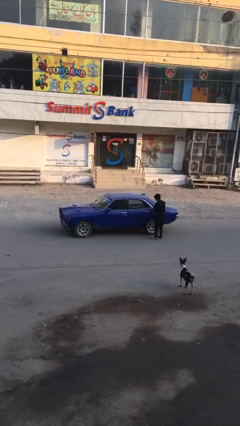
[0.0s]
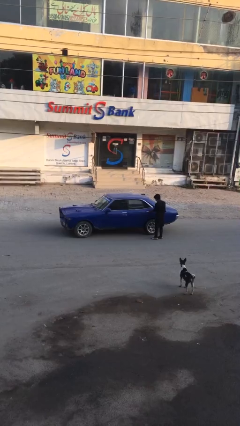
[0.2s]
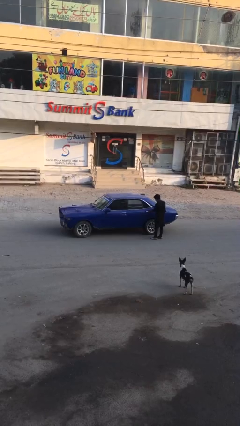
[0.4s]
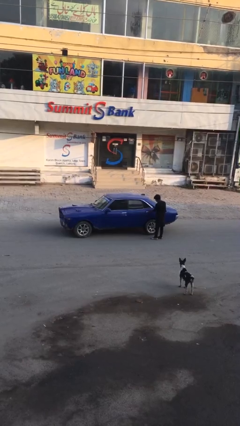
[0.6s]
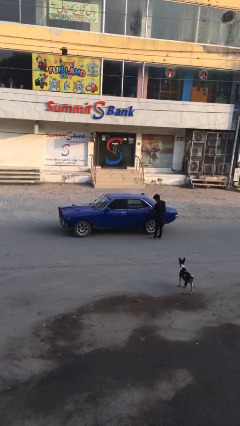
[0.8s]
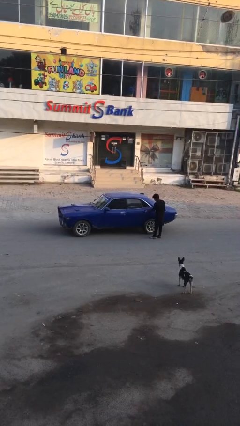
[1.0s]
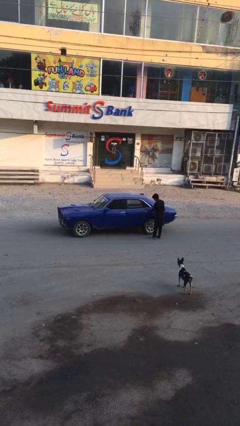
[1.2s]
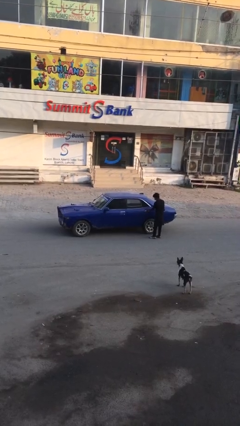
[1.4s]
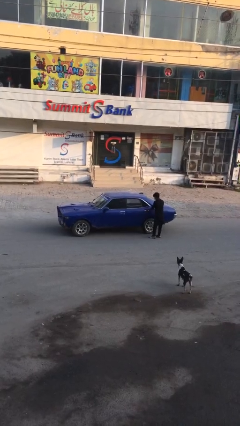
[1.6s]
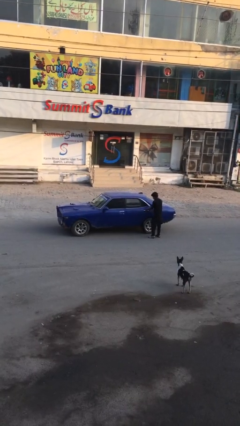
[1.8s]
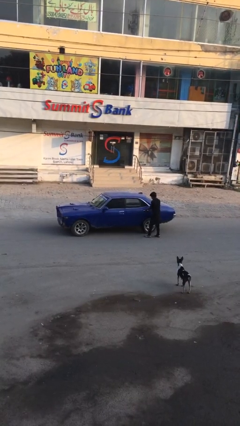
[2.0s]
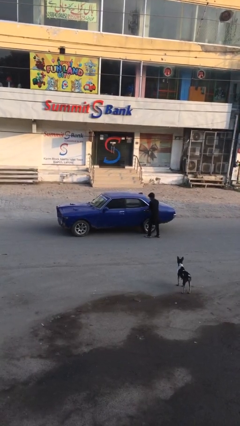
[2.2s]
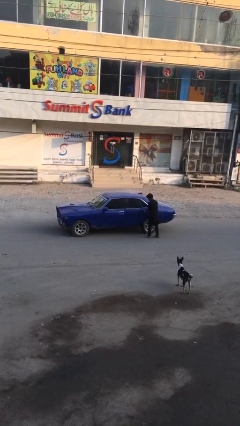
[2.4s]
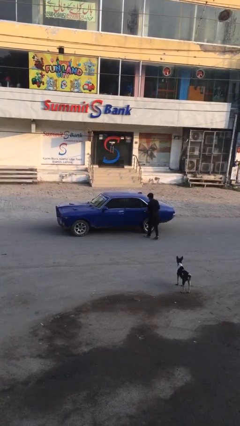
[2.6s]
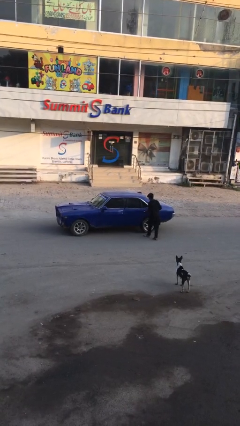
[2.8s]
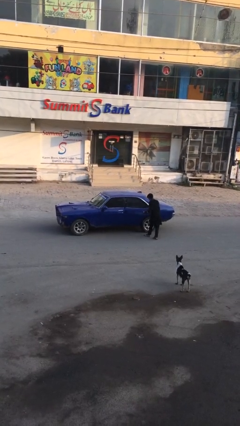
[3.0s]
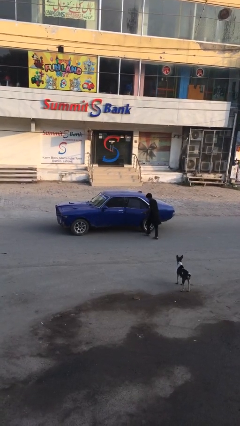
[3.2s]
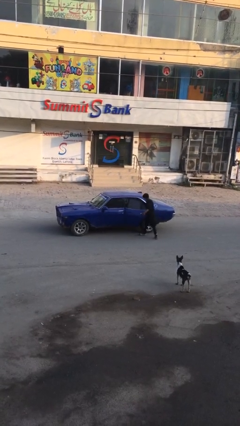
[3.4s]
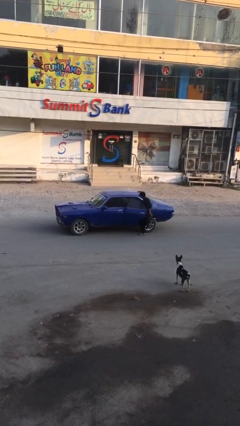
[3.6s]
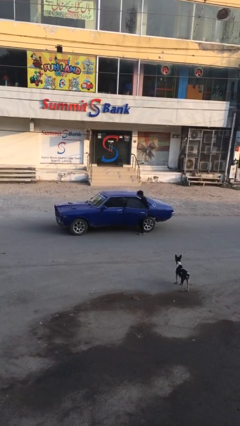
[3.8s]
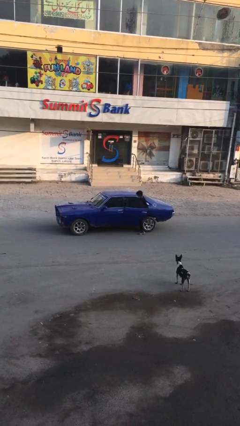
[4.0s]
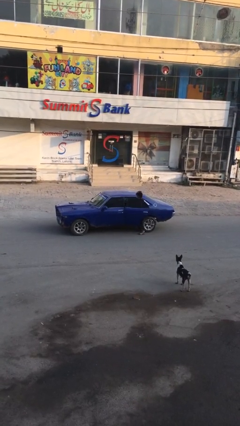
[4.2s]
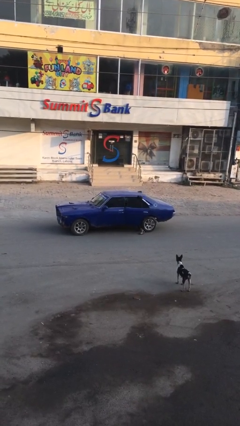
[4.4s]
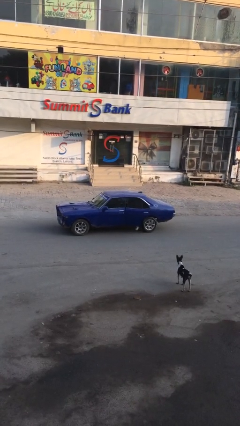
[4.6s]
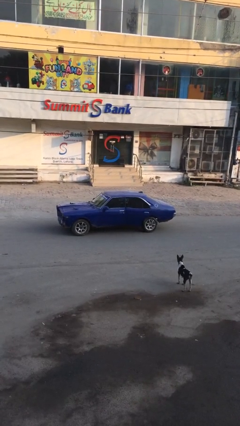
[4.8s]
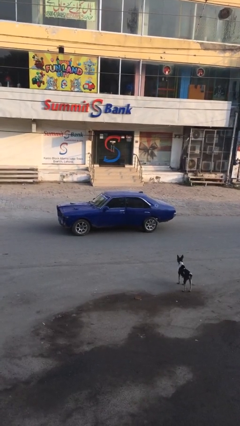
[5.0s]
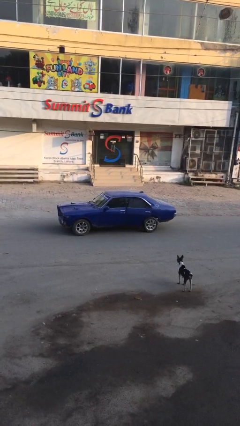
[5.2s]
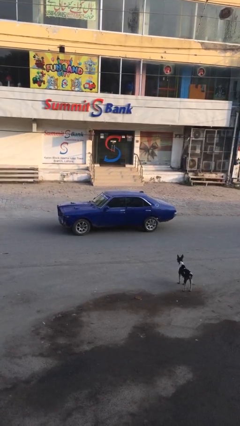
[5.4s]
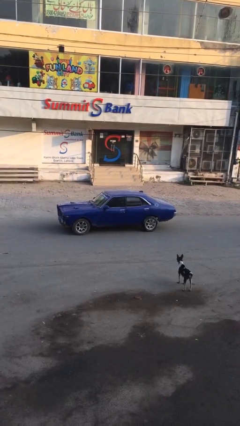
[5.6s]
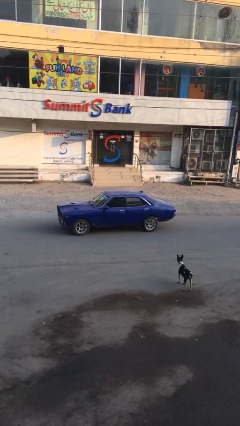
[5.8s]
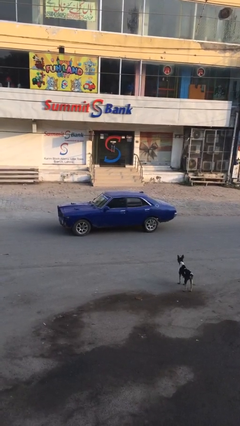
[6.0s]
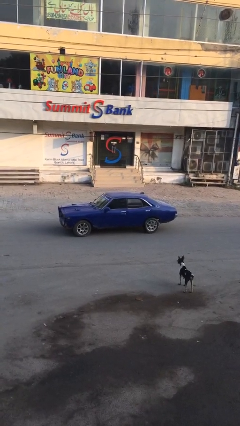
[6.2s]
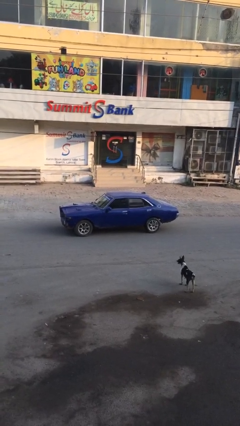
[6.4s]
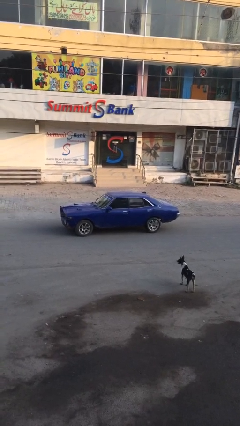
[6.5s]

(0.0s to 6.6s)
car picks up person

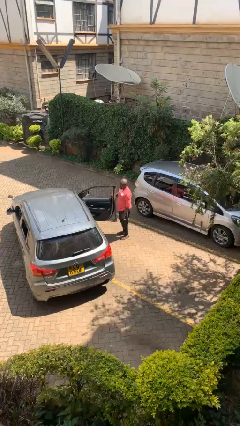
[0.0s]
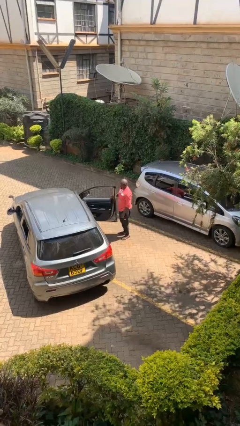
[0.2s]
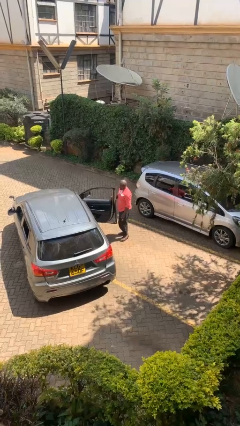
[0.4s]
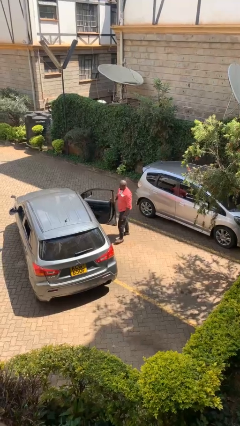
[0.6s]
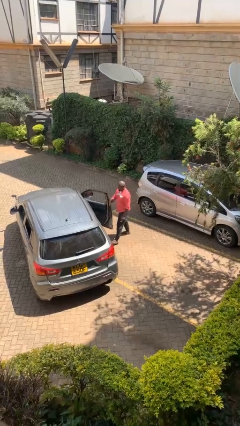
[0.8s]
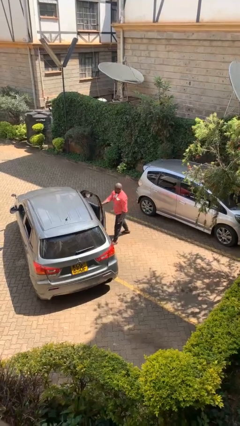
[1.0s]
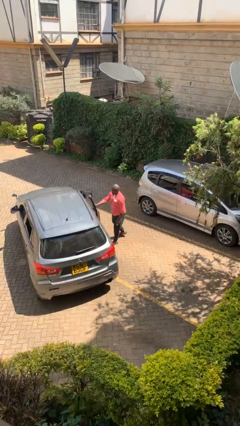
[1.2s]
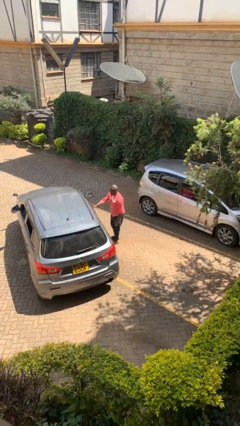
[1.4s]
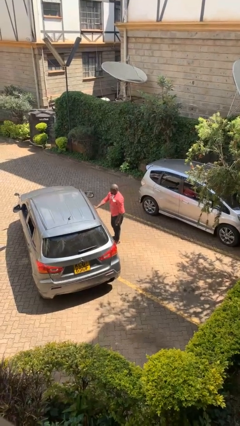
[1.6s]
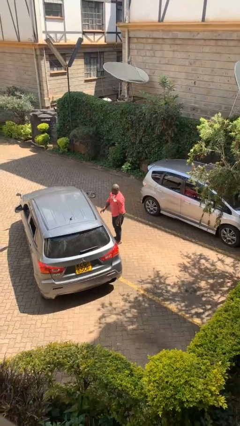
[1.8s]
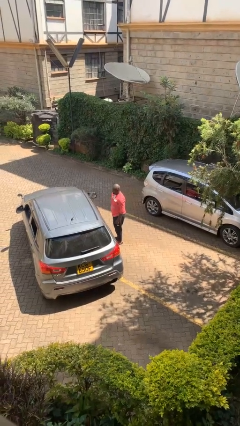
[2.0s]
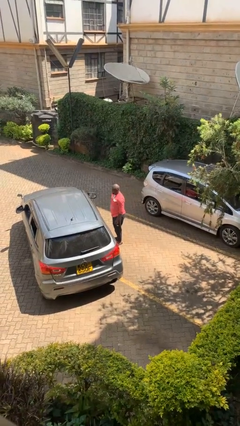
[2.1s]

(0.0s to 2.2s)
person closes car door

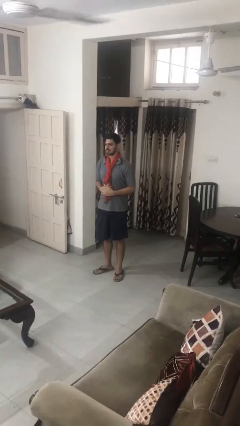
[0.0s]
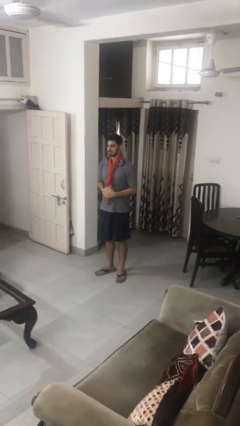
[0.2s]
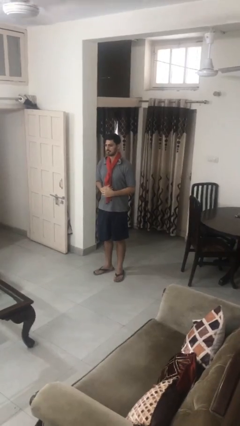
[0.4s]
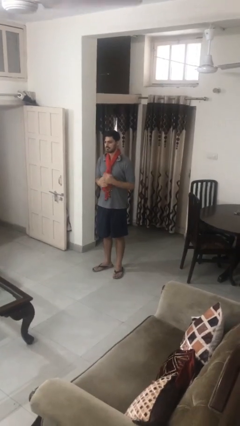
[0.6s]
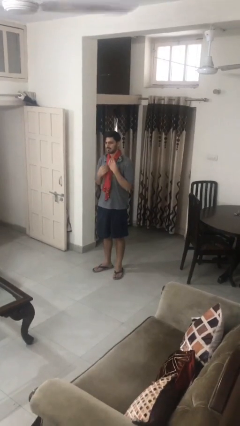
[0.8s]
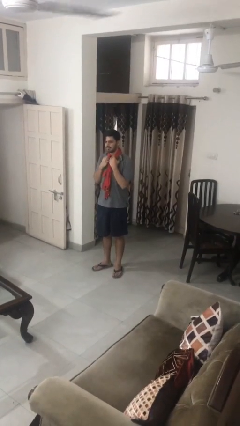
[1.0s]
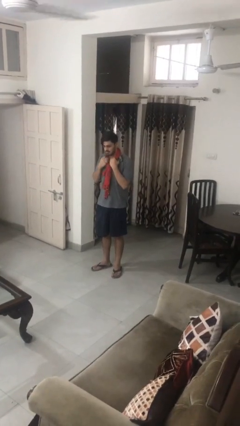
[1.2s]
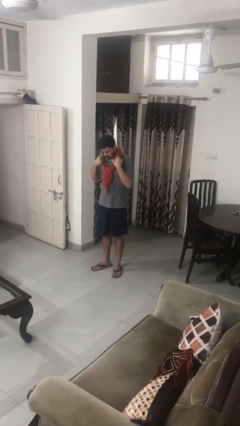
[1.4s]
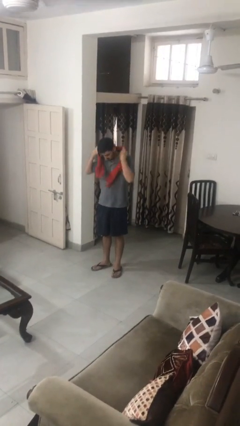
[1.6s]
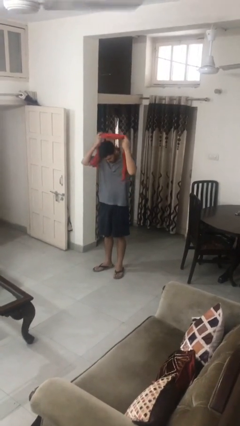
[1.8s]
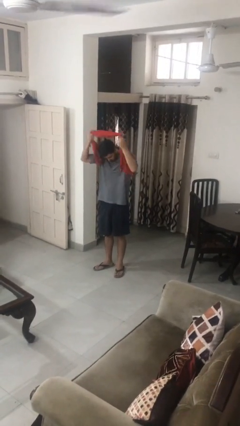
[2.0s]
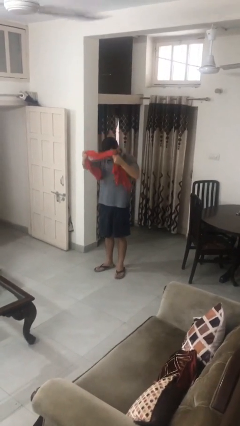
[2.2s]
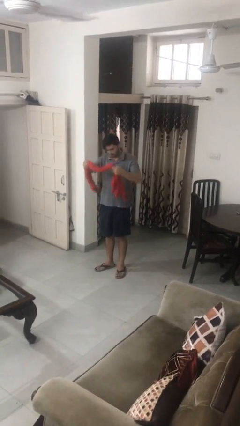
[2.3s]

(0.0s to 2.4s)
person takes off scarf

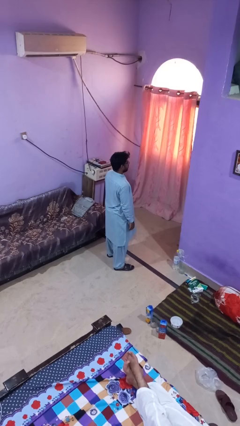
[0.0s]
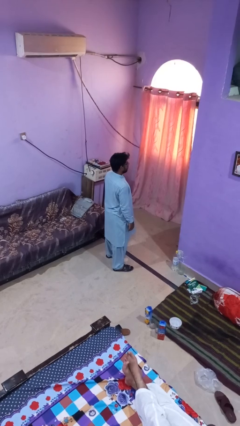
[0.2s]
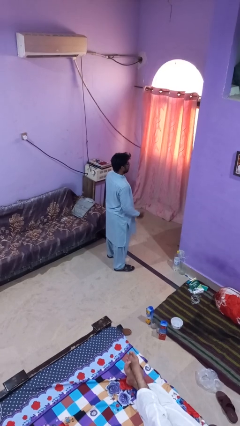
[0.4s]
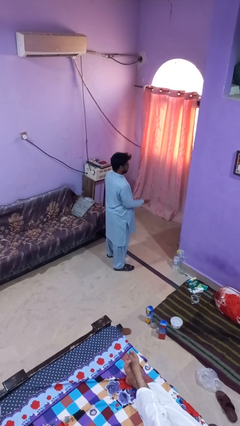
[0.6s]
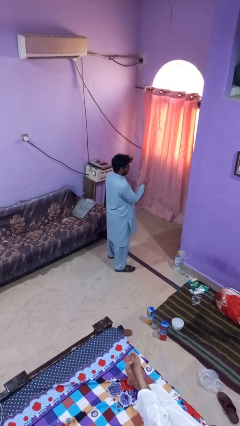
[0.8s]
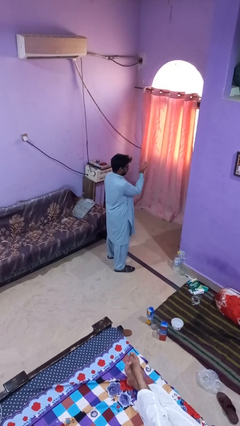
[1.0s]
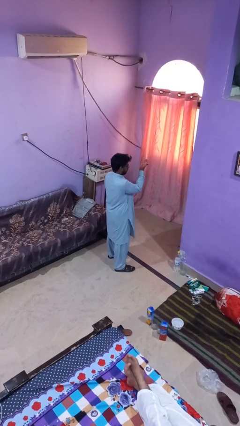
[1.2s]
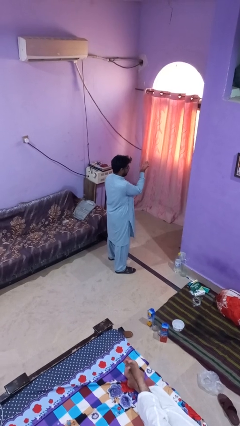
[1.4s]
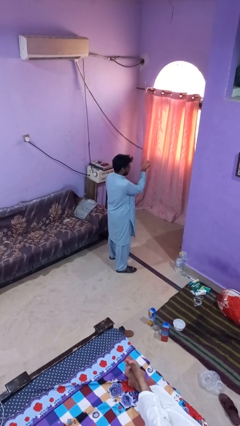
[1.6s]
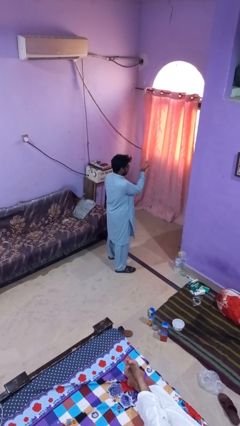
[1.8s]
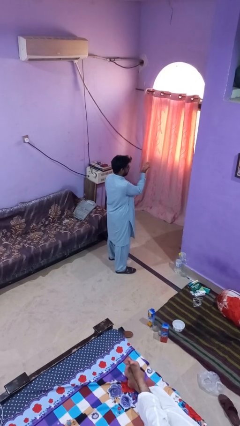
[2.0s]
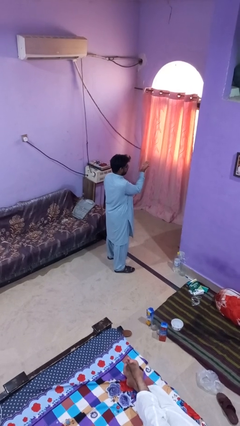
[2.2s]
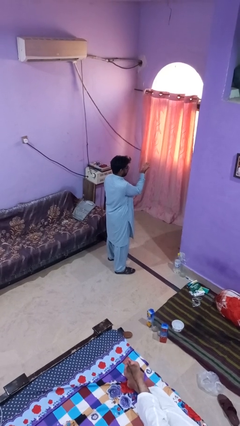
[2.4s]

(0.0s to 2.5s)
person gestures swipe up

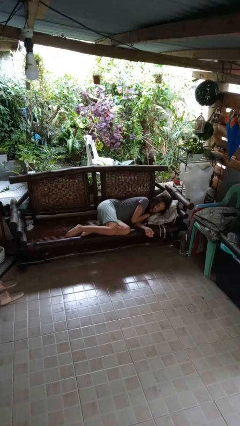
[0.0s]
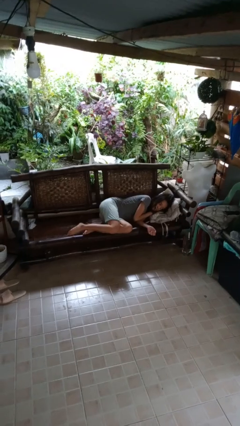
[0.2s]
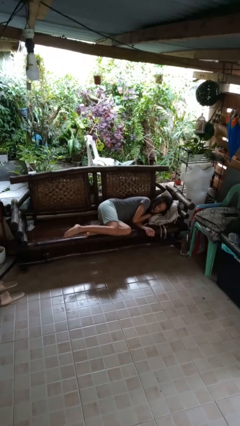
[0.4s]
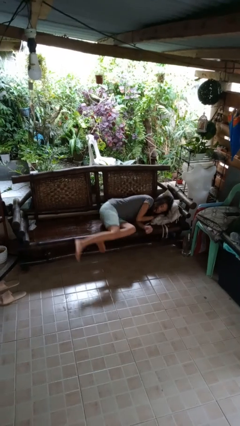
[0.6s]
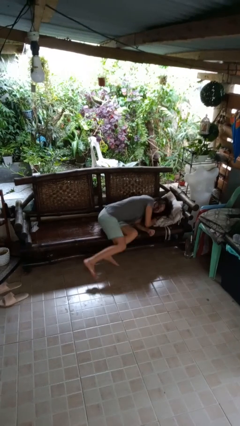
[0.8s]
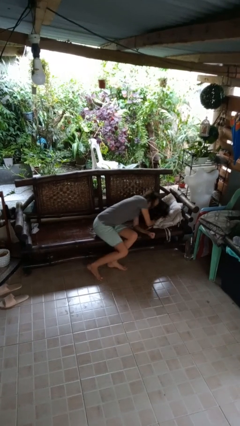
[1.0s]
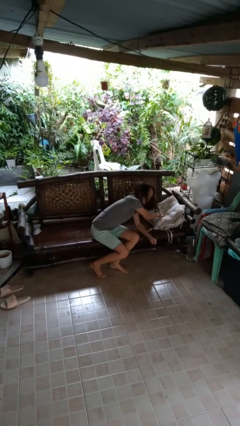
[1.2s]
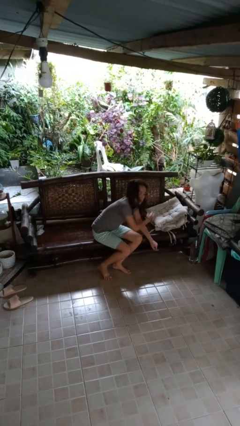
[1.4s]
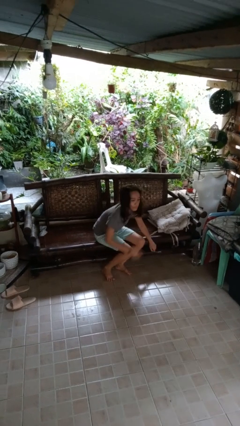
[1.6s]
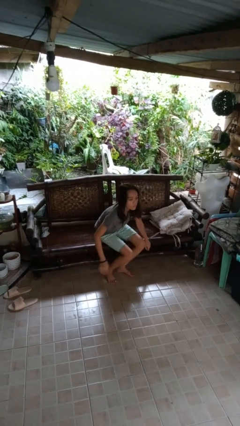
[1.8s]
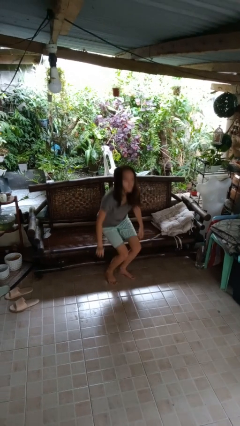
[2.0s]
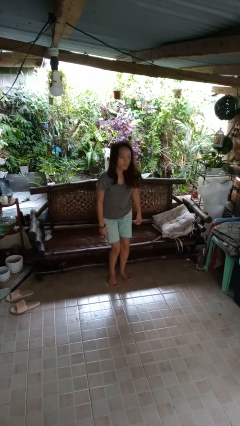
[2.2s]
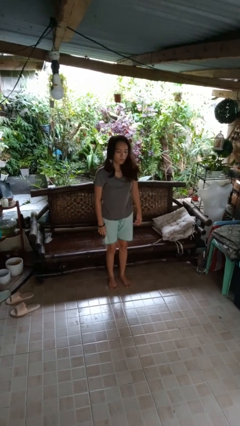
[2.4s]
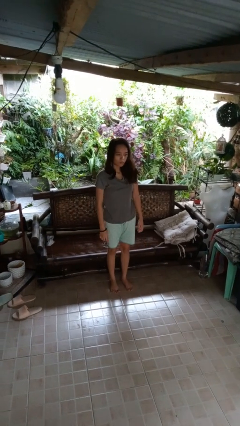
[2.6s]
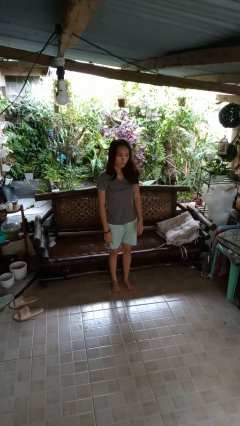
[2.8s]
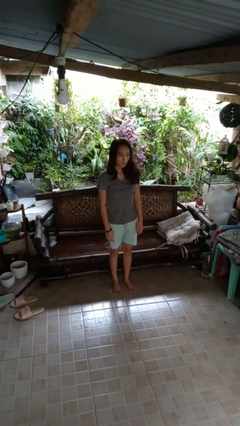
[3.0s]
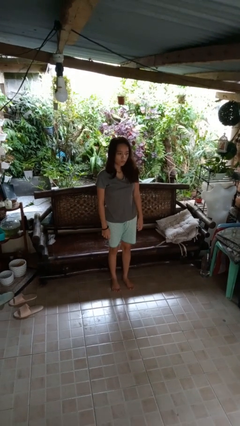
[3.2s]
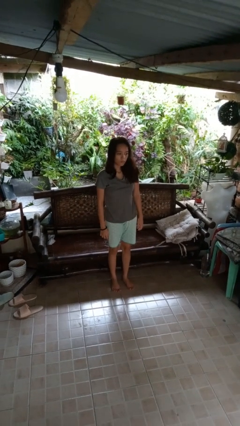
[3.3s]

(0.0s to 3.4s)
person stands up

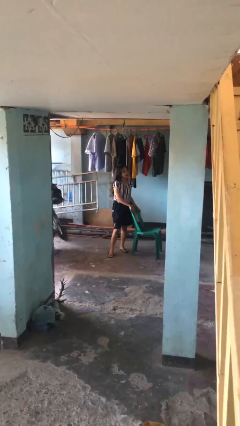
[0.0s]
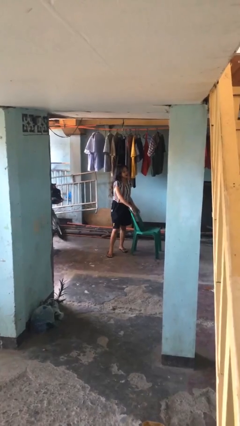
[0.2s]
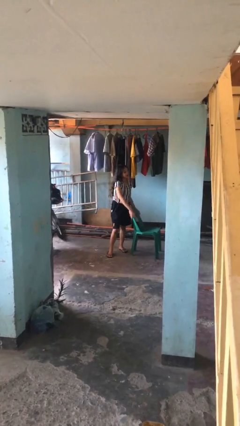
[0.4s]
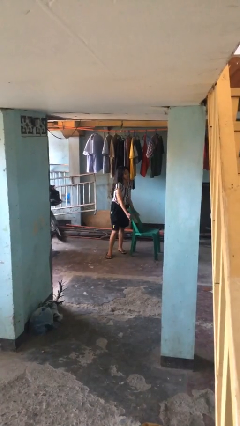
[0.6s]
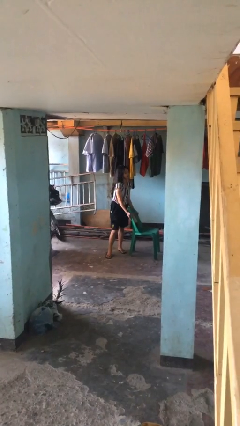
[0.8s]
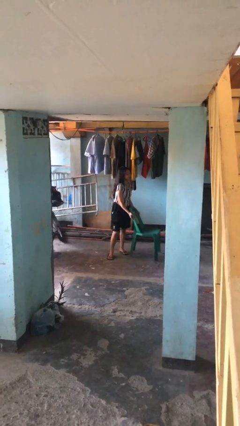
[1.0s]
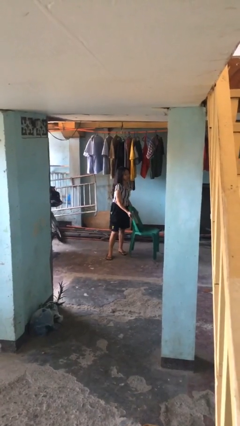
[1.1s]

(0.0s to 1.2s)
person picks up object from floor
